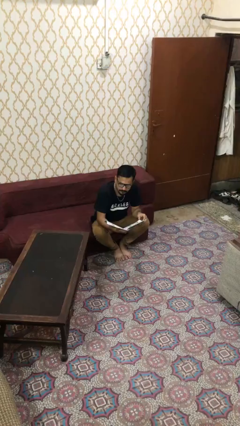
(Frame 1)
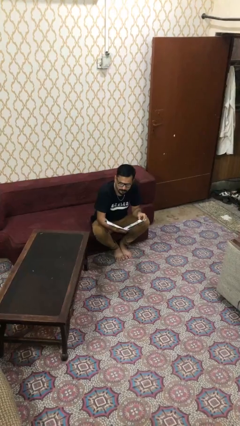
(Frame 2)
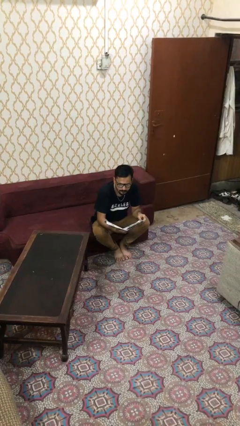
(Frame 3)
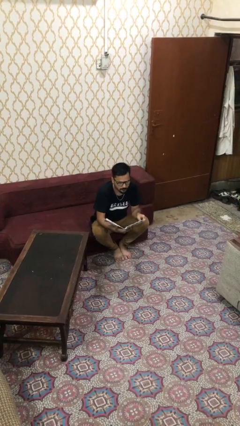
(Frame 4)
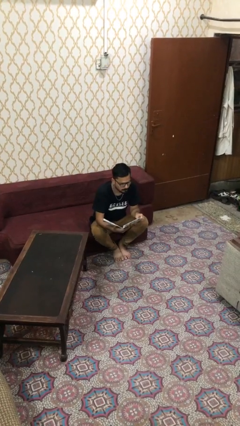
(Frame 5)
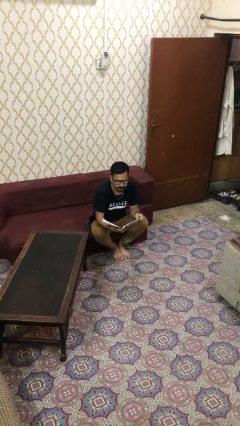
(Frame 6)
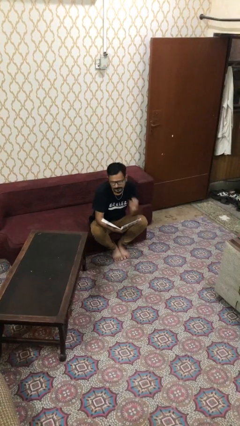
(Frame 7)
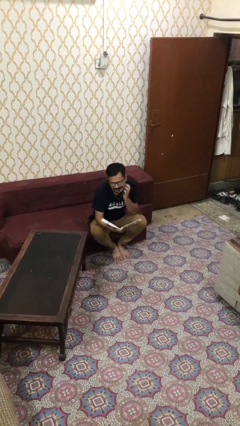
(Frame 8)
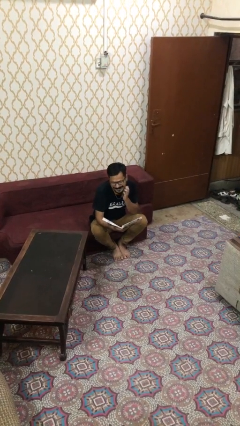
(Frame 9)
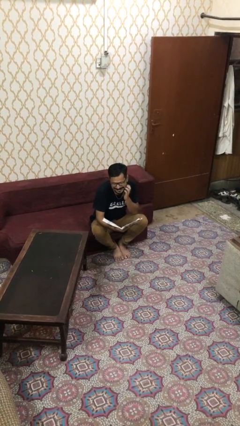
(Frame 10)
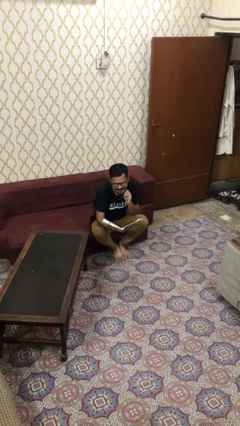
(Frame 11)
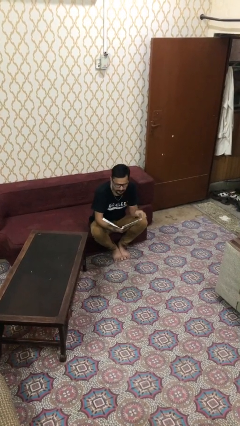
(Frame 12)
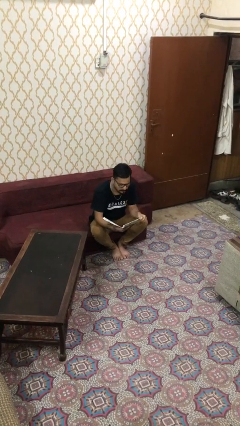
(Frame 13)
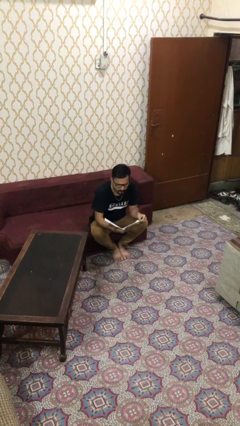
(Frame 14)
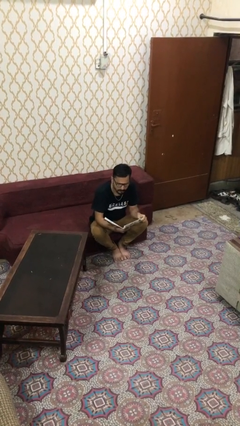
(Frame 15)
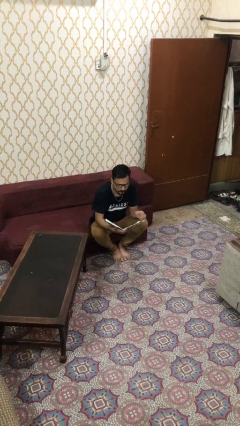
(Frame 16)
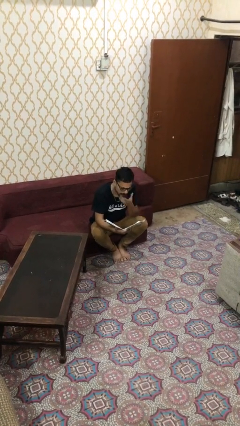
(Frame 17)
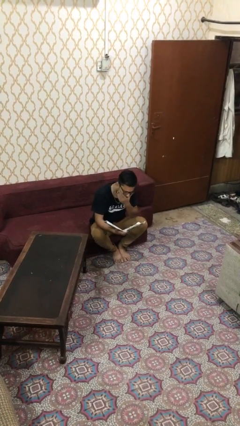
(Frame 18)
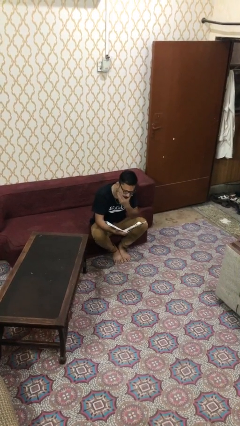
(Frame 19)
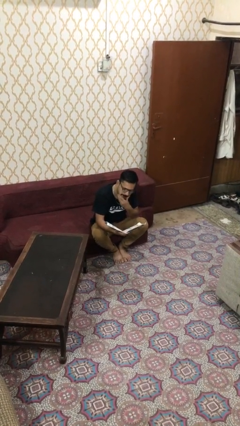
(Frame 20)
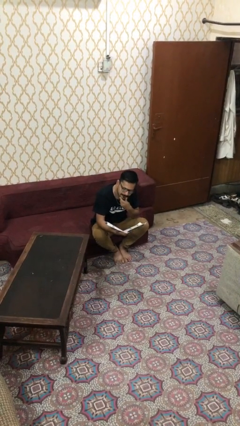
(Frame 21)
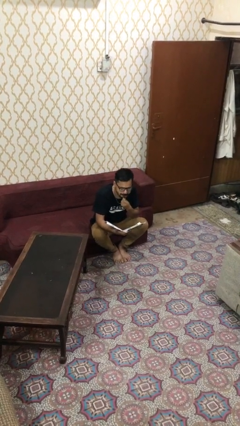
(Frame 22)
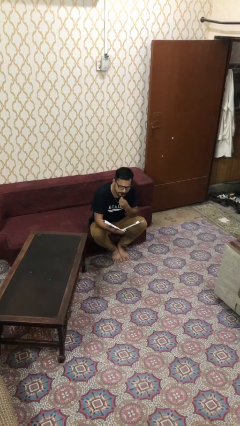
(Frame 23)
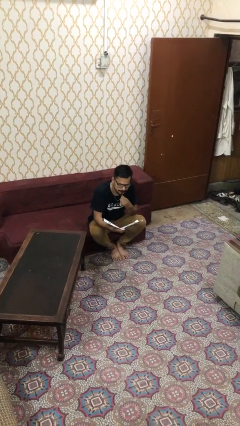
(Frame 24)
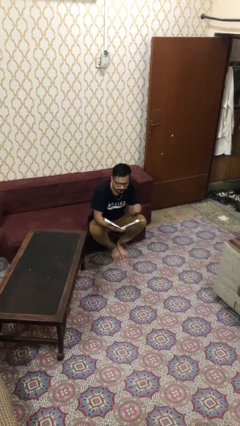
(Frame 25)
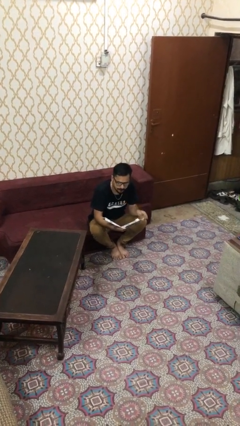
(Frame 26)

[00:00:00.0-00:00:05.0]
person reads document

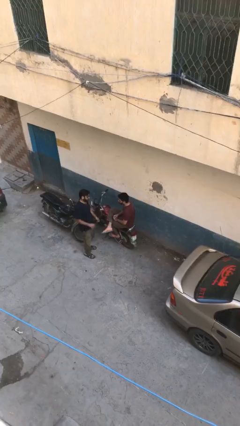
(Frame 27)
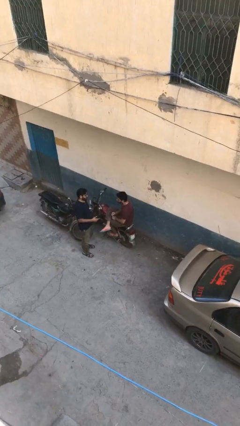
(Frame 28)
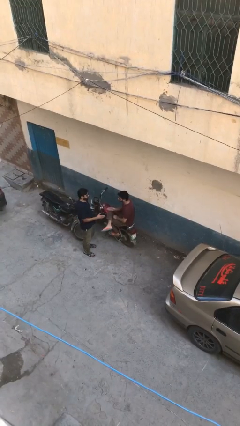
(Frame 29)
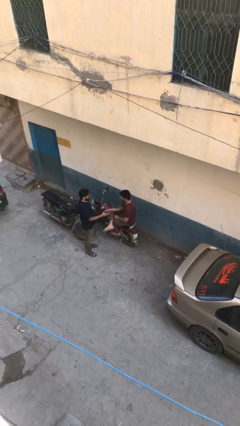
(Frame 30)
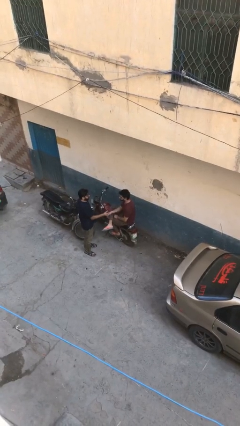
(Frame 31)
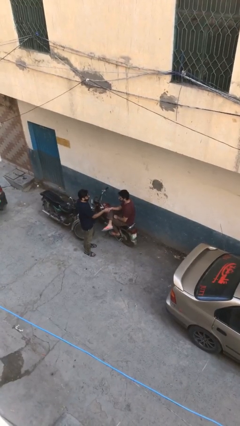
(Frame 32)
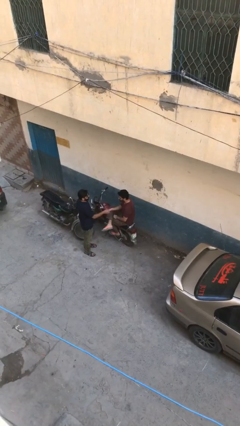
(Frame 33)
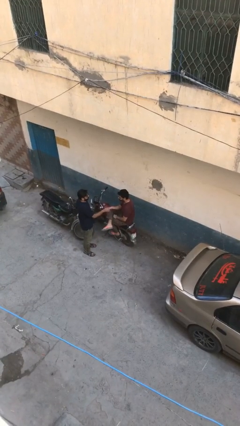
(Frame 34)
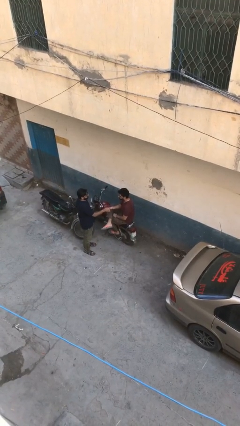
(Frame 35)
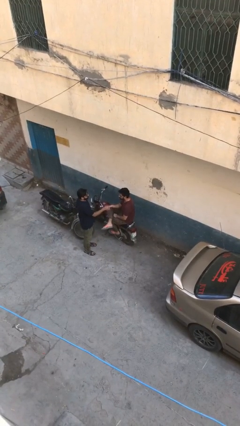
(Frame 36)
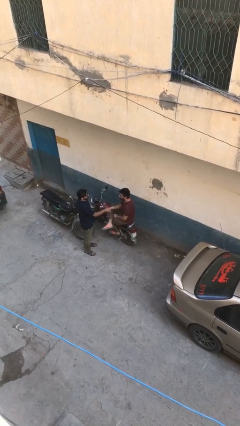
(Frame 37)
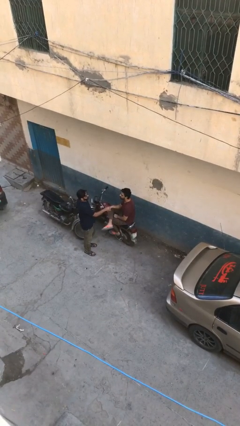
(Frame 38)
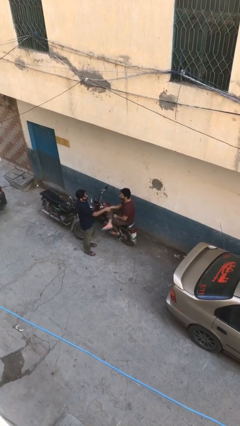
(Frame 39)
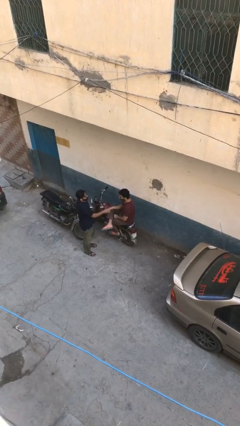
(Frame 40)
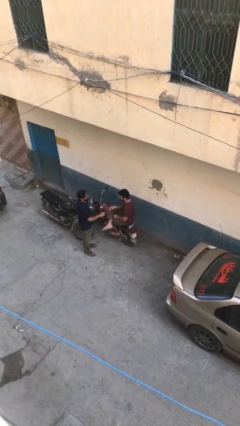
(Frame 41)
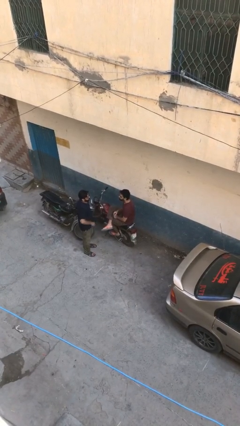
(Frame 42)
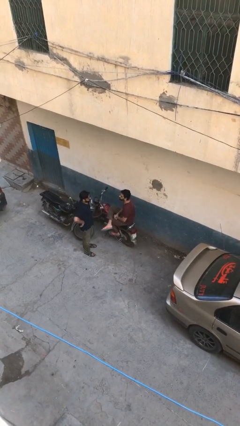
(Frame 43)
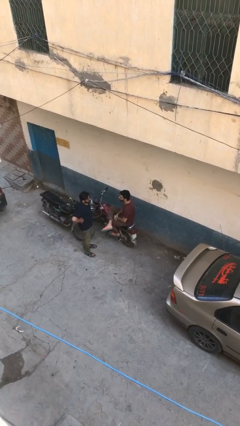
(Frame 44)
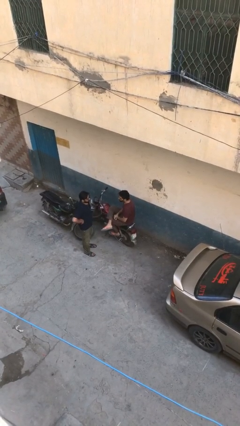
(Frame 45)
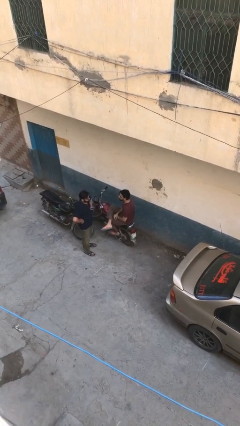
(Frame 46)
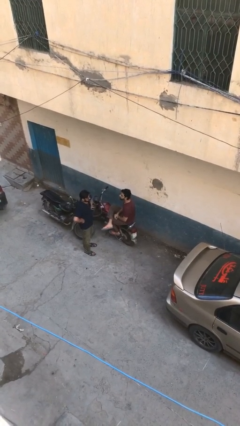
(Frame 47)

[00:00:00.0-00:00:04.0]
person shakes hand

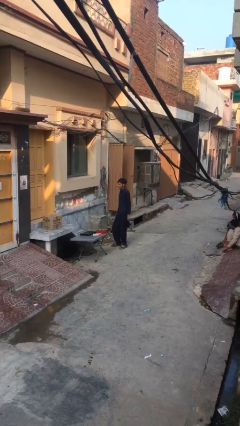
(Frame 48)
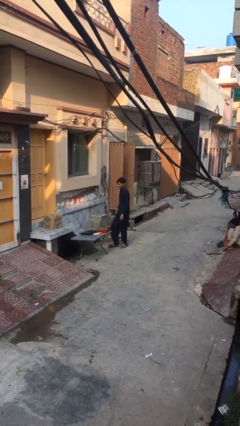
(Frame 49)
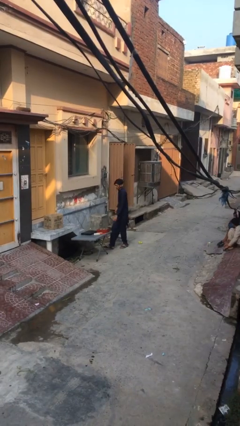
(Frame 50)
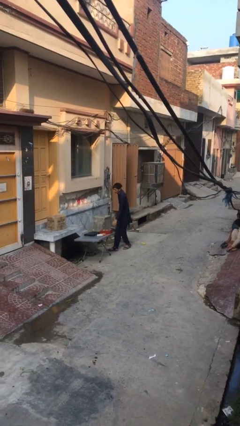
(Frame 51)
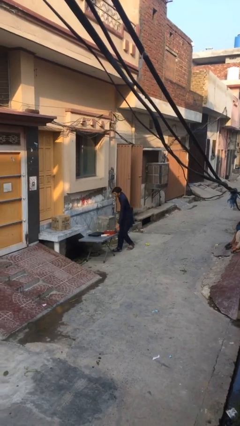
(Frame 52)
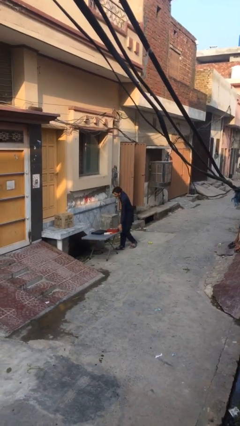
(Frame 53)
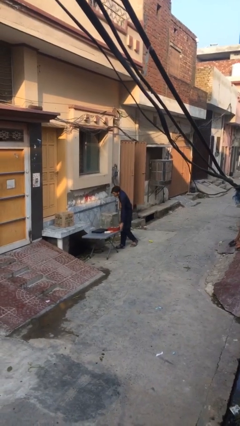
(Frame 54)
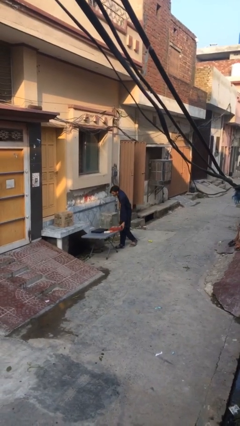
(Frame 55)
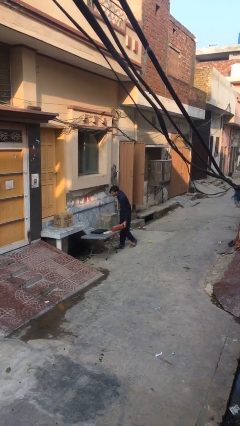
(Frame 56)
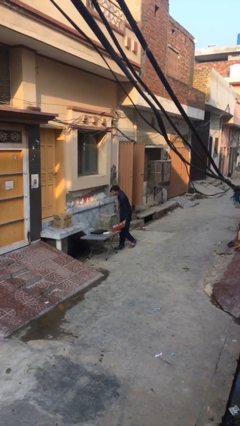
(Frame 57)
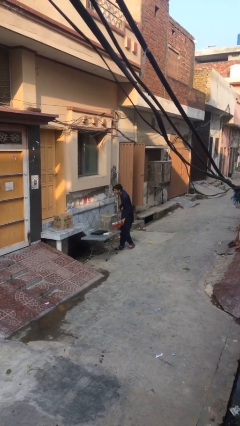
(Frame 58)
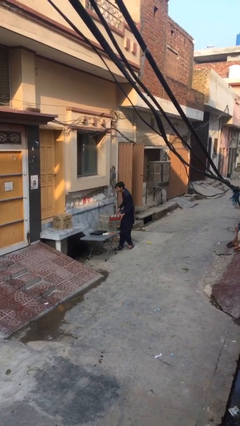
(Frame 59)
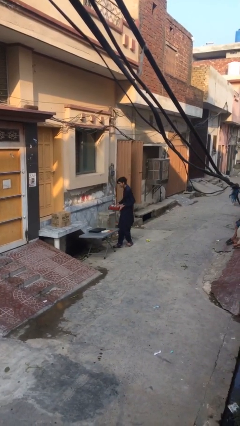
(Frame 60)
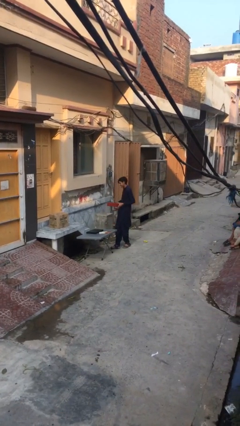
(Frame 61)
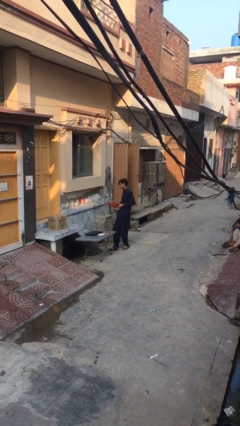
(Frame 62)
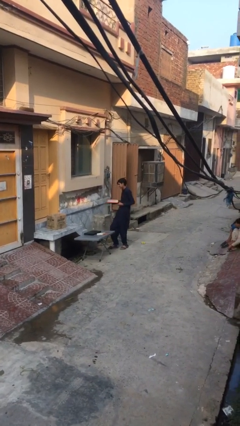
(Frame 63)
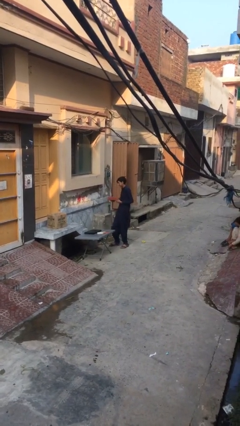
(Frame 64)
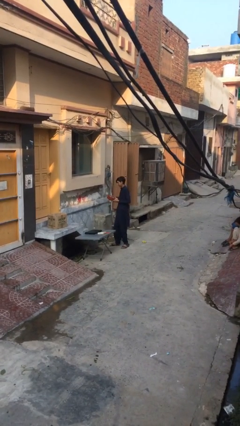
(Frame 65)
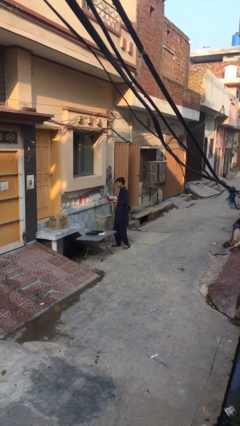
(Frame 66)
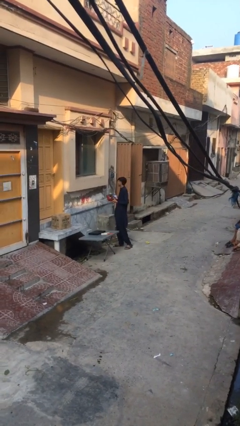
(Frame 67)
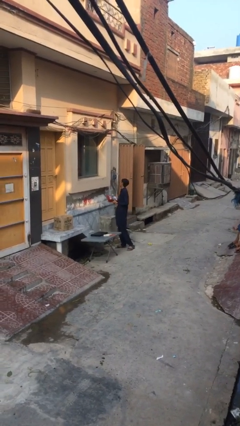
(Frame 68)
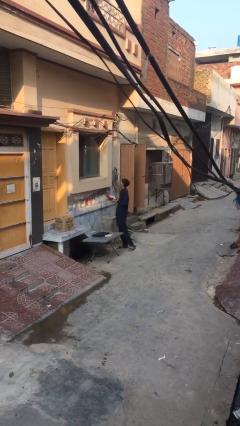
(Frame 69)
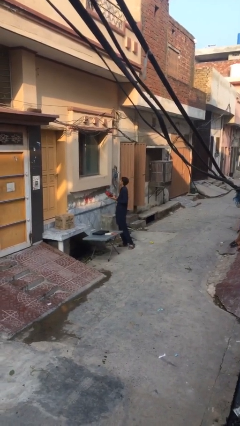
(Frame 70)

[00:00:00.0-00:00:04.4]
person picks up object from table

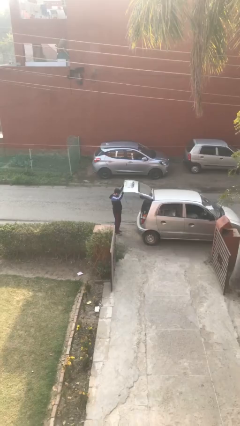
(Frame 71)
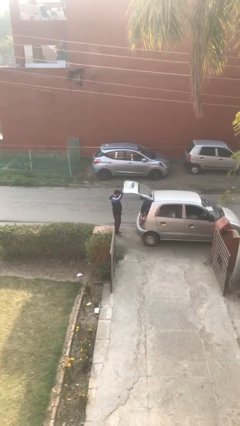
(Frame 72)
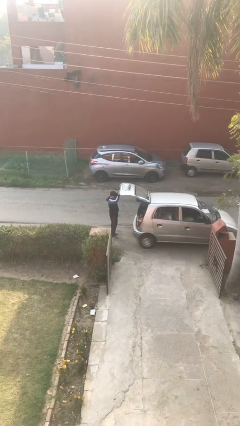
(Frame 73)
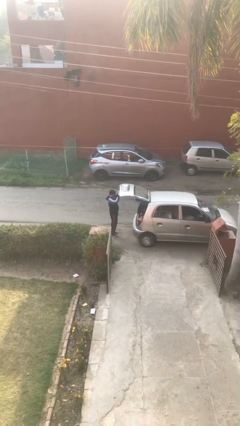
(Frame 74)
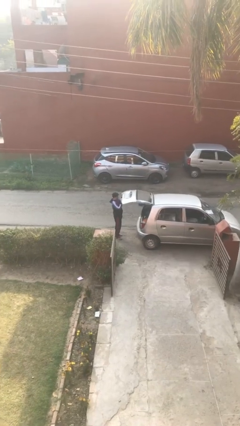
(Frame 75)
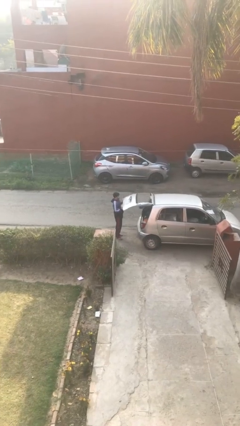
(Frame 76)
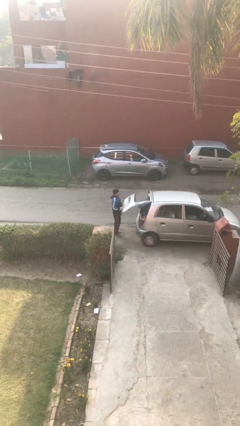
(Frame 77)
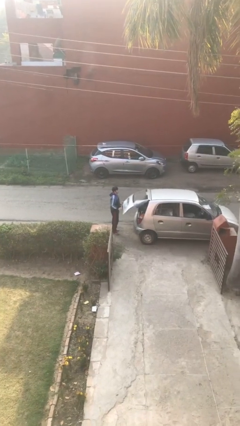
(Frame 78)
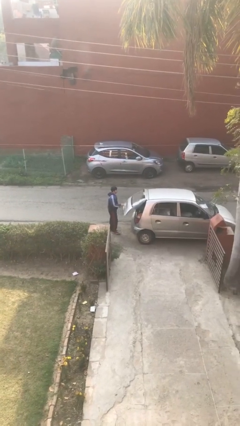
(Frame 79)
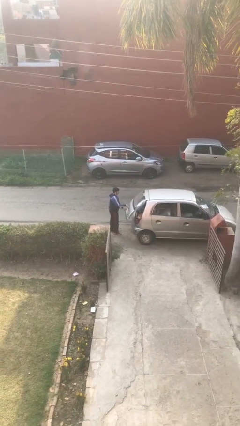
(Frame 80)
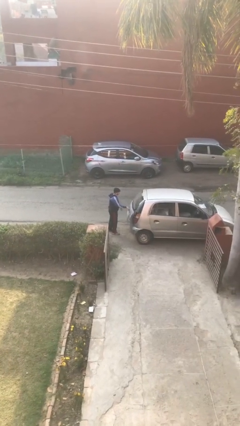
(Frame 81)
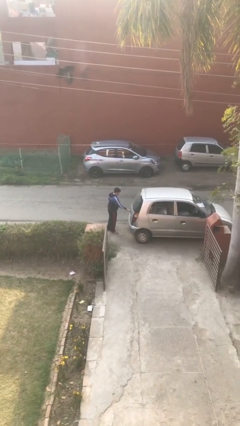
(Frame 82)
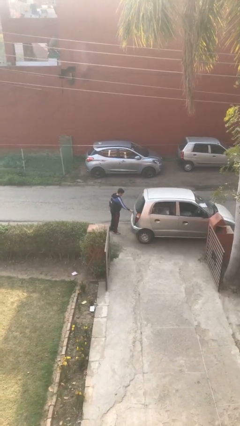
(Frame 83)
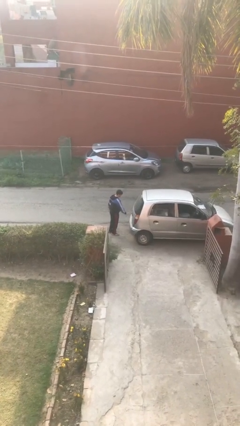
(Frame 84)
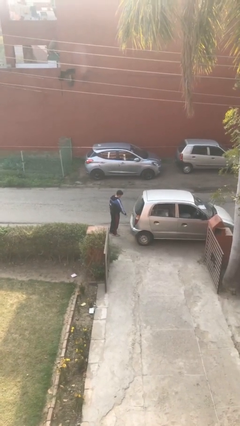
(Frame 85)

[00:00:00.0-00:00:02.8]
person closes car trunk

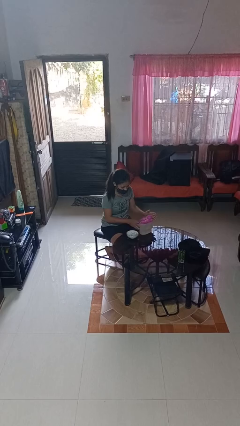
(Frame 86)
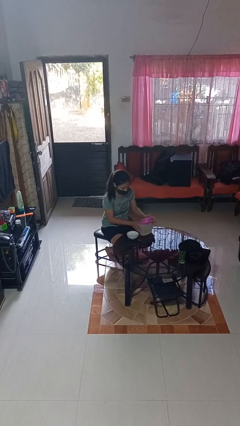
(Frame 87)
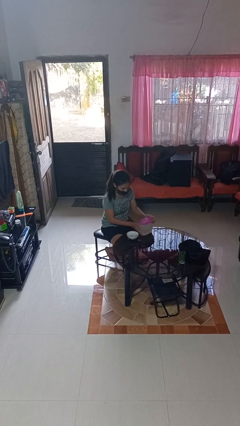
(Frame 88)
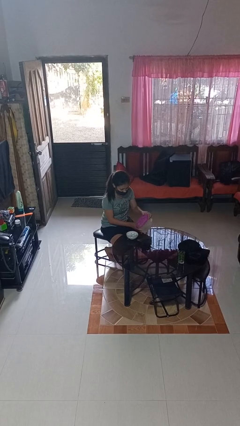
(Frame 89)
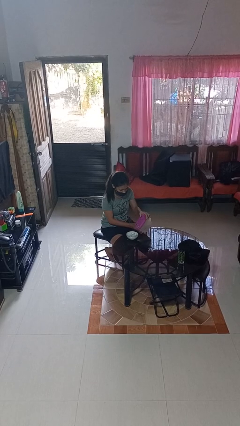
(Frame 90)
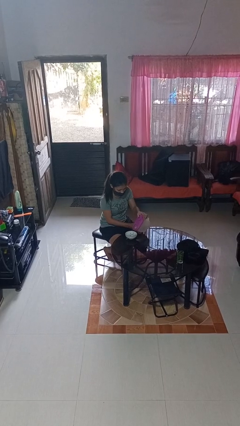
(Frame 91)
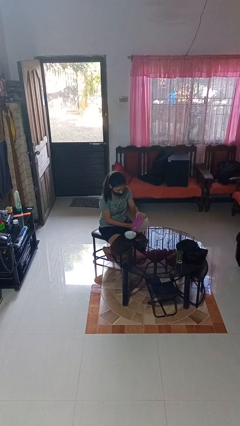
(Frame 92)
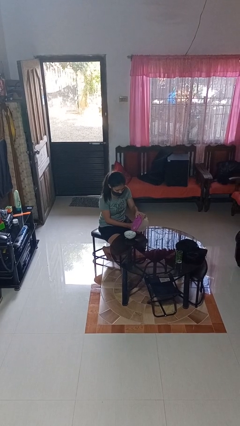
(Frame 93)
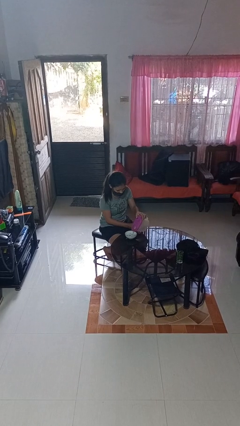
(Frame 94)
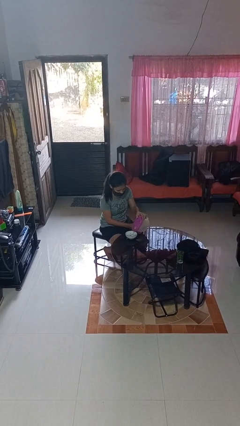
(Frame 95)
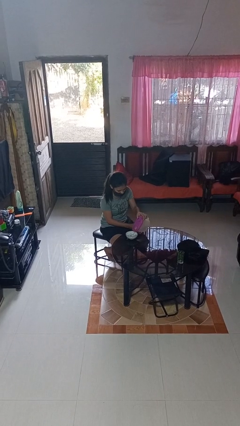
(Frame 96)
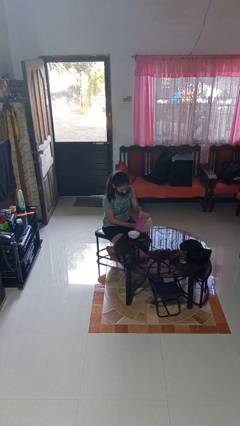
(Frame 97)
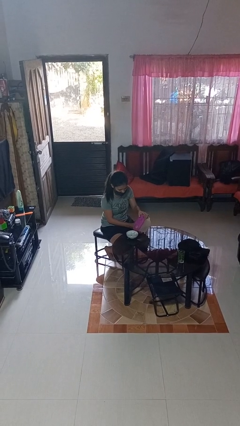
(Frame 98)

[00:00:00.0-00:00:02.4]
person pours into bowl
